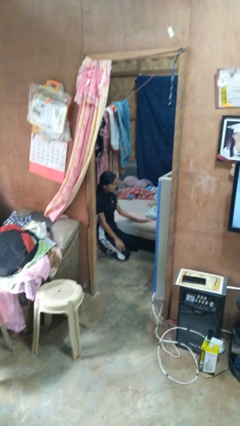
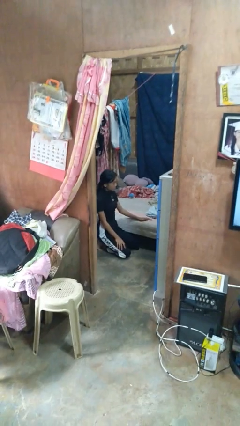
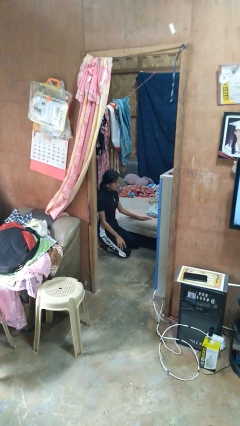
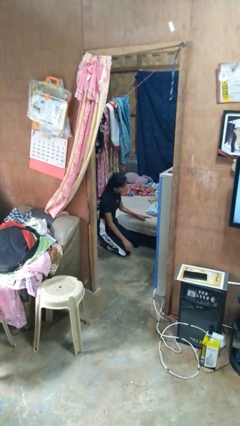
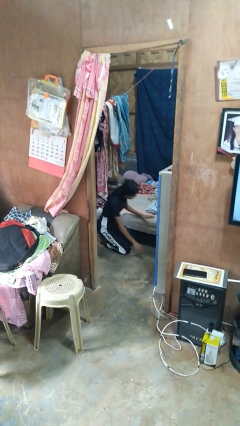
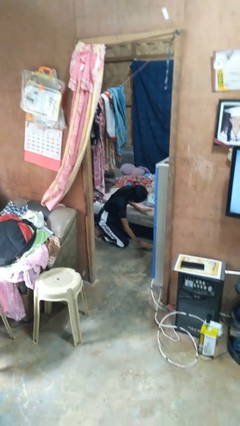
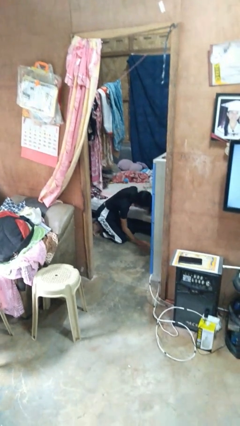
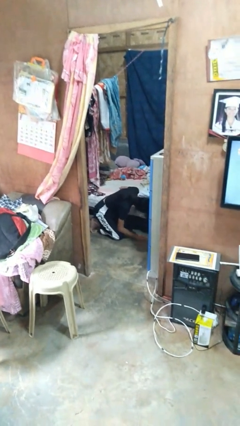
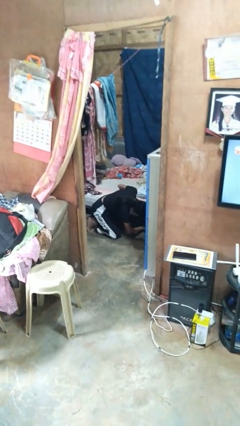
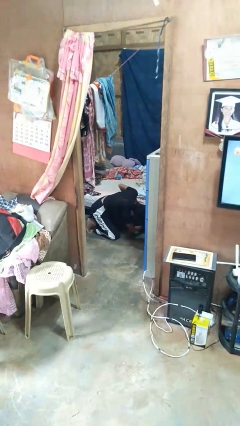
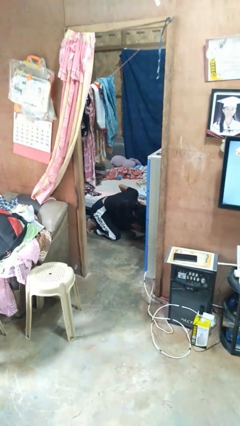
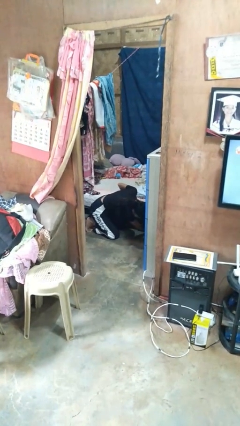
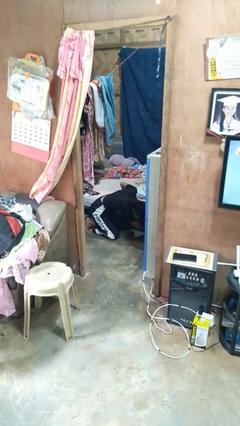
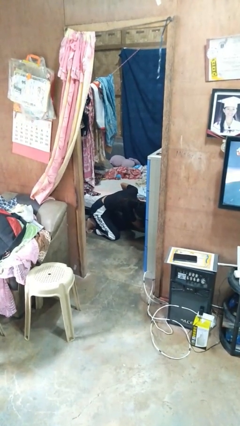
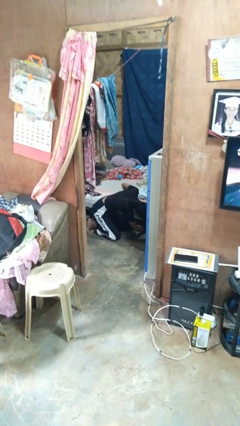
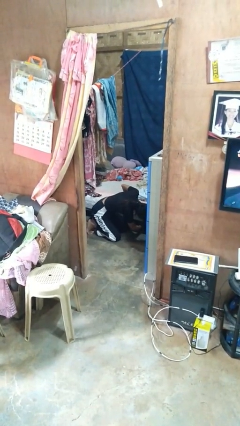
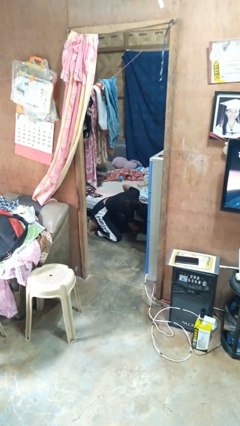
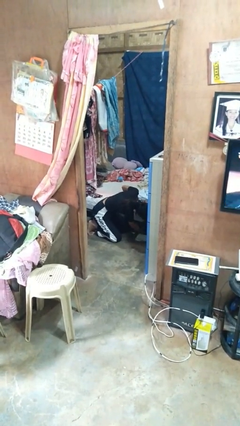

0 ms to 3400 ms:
person searches under bed

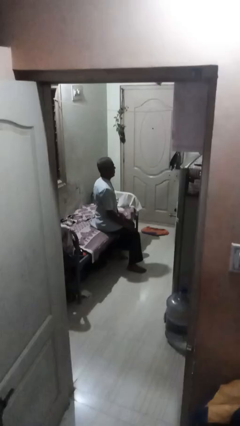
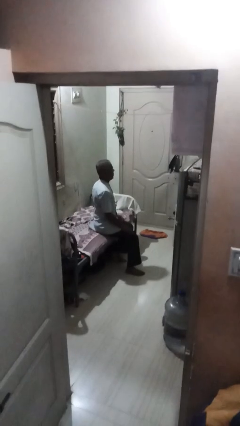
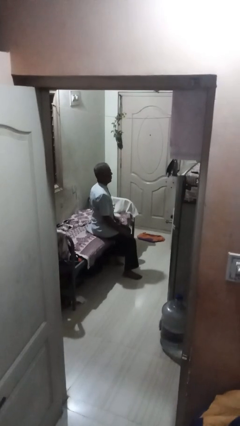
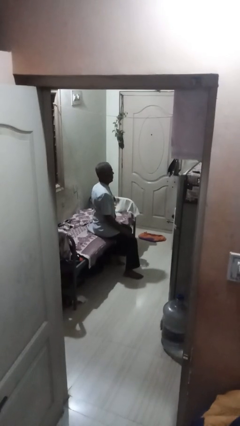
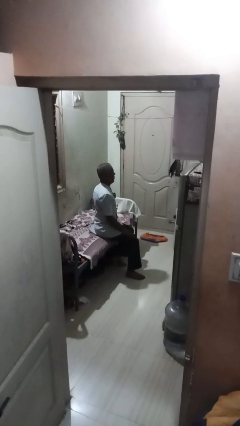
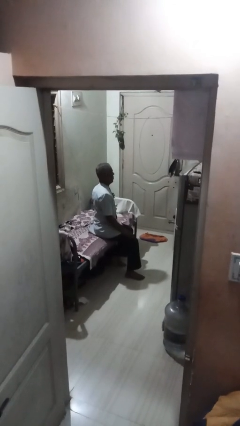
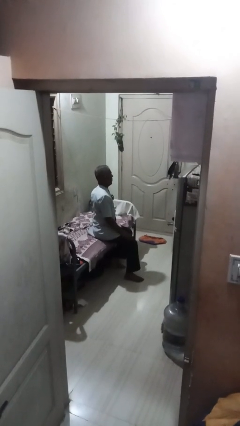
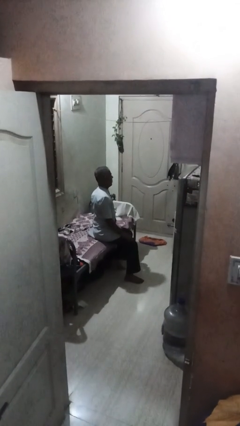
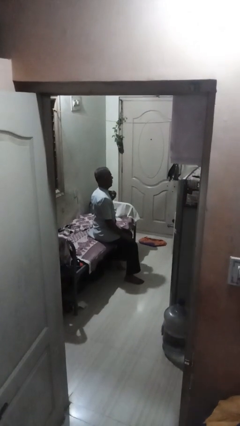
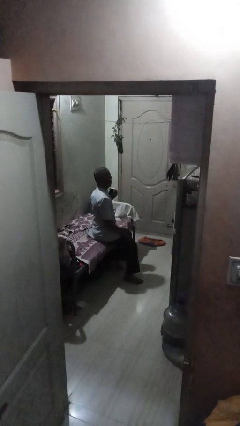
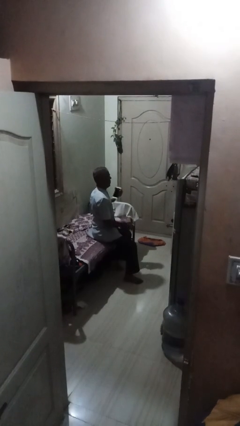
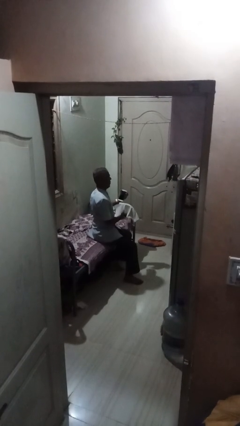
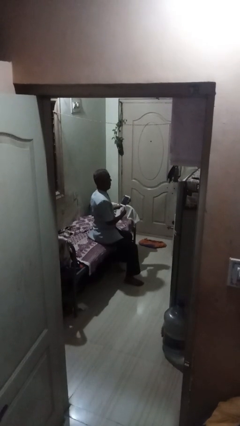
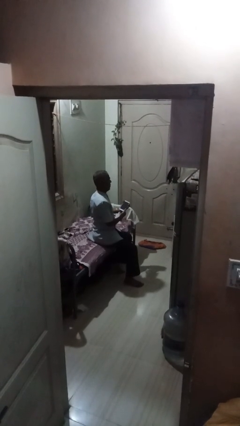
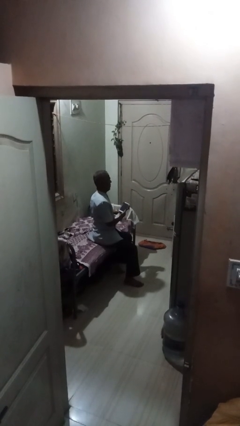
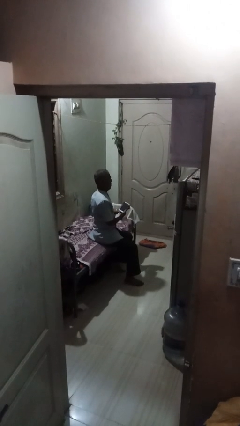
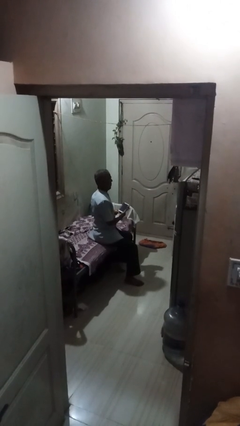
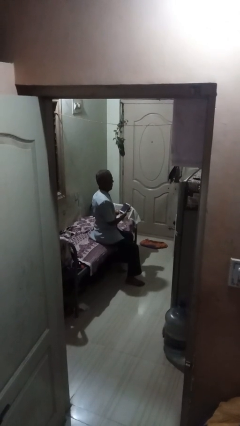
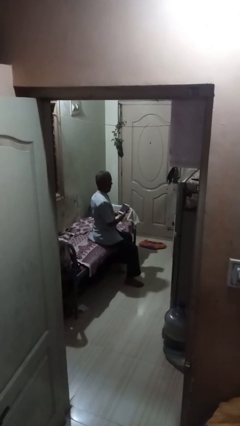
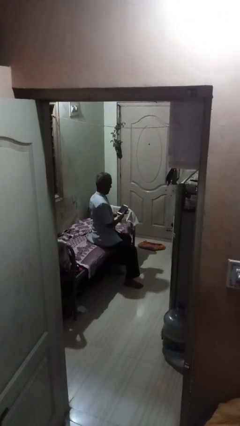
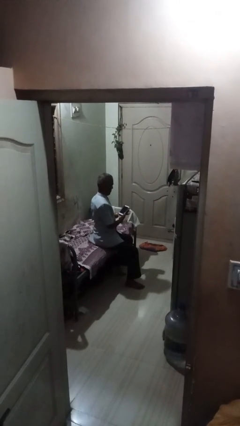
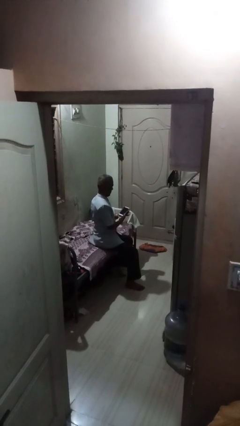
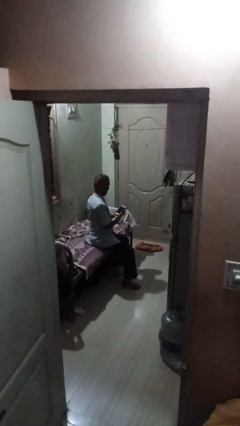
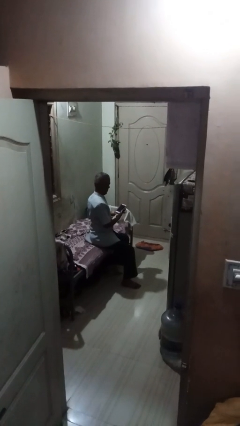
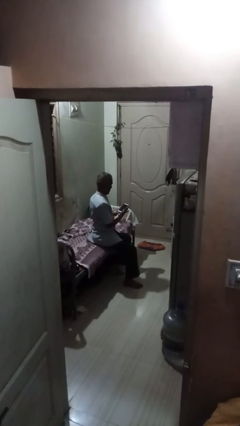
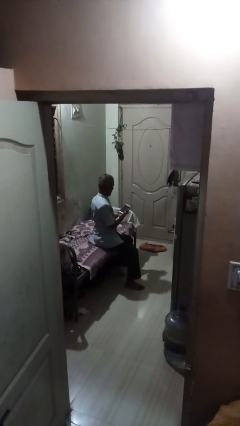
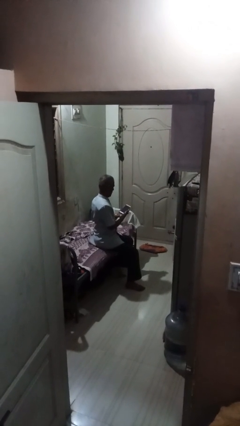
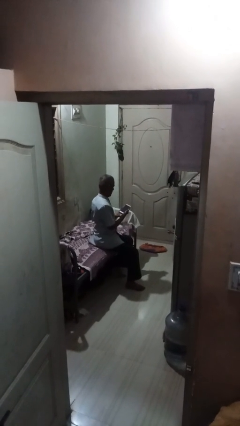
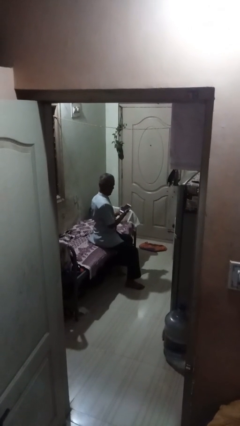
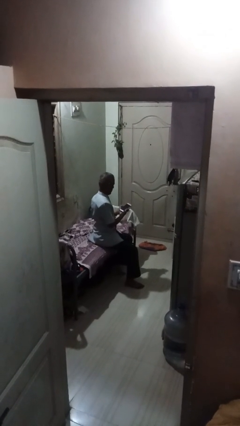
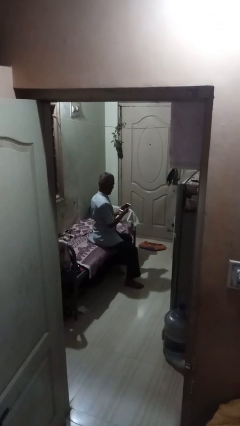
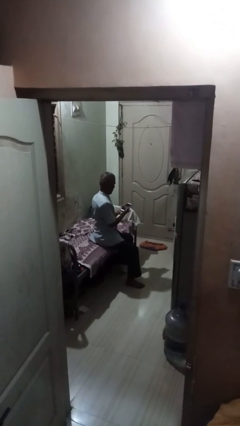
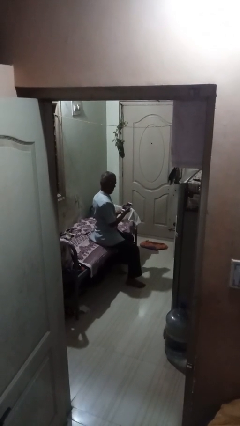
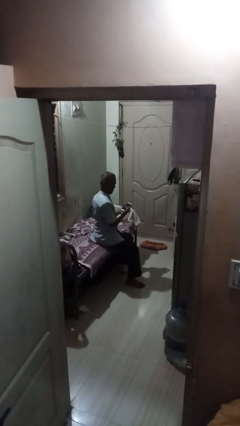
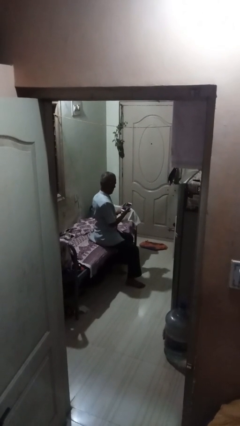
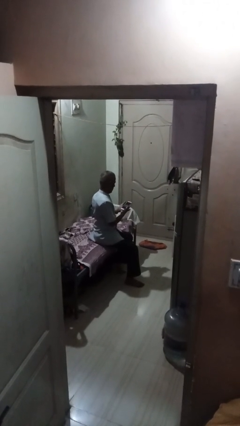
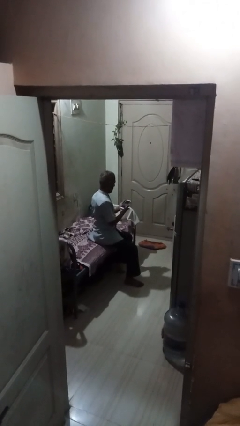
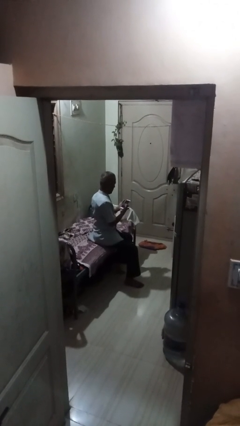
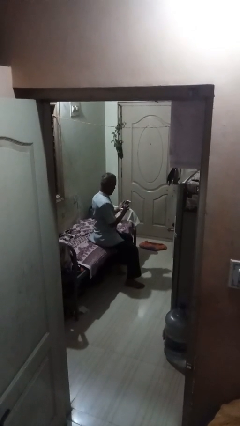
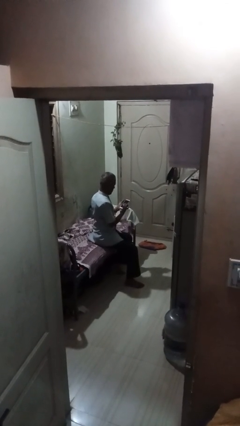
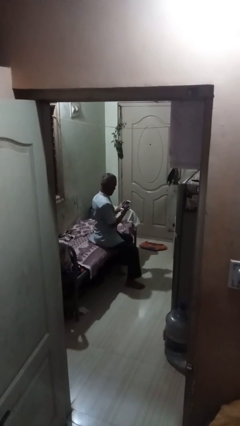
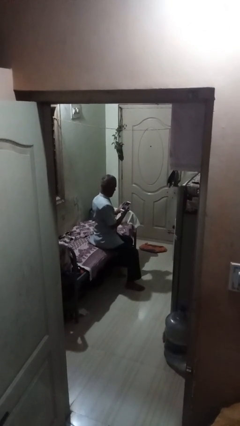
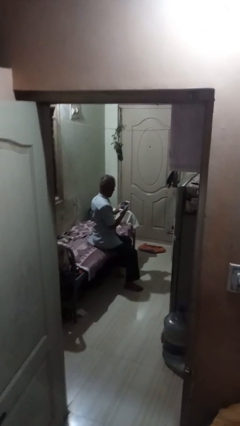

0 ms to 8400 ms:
person takes phone from pocket

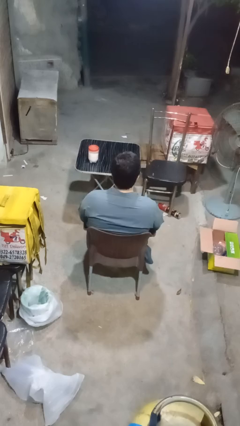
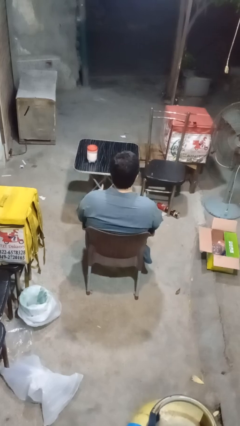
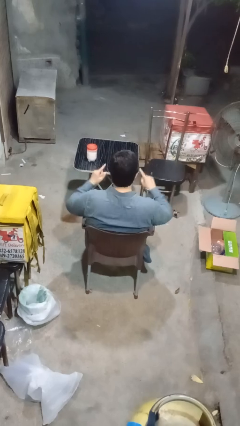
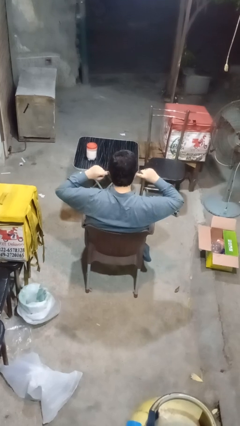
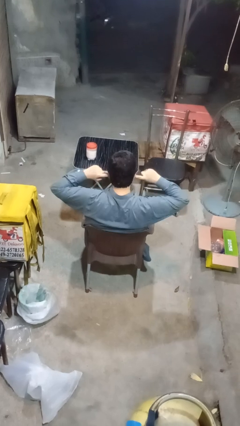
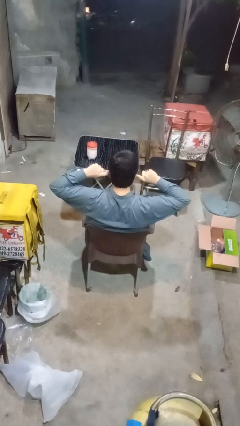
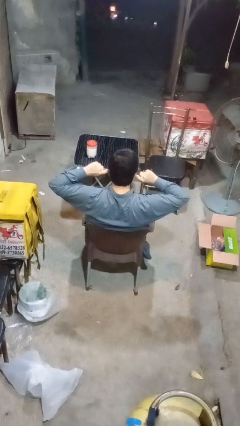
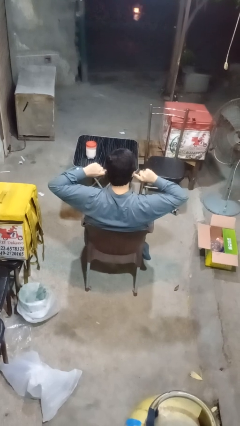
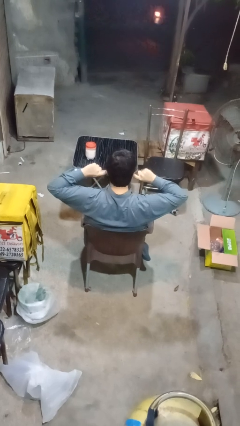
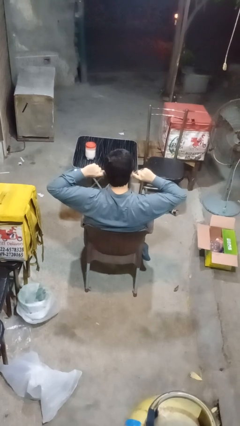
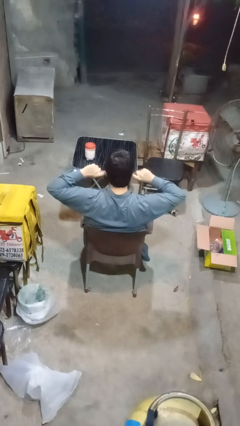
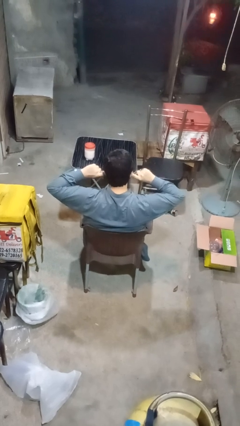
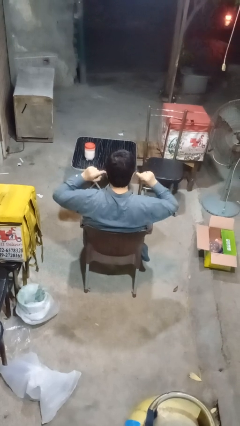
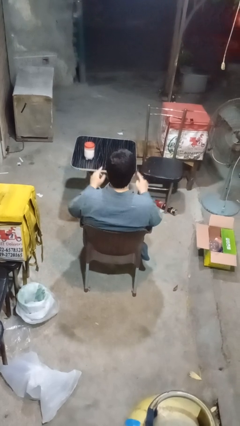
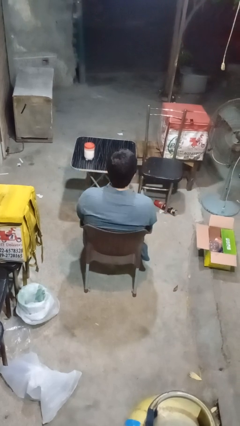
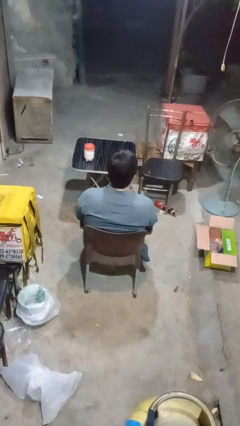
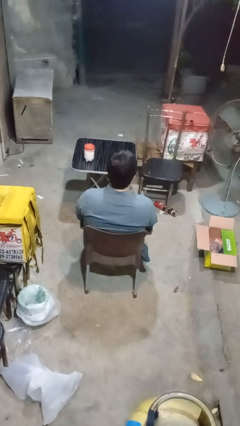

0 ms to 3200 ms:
person puts fingers in ear

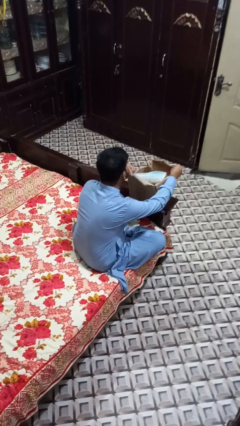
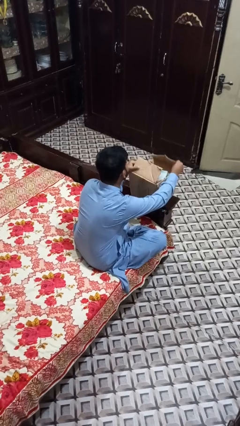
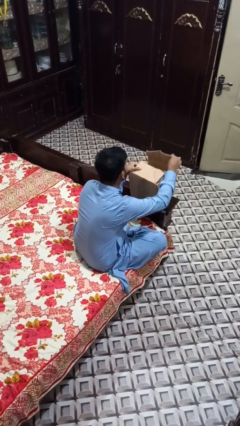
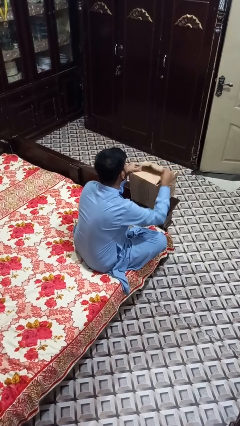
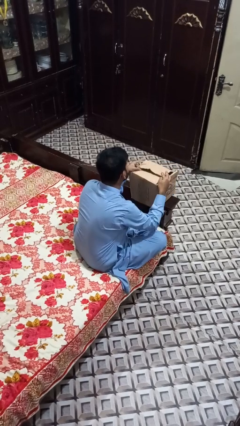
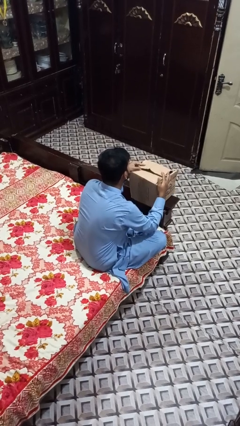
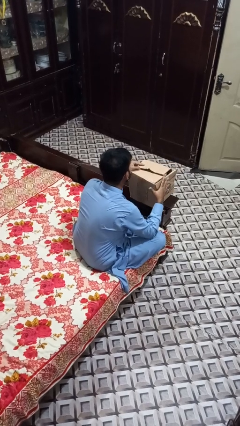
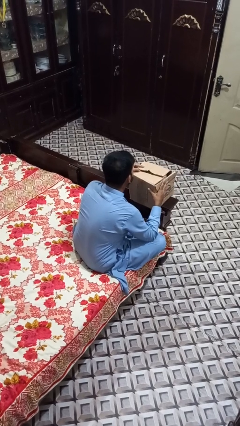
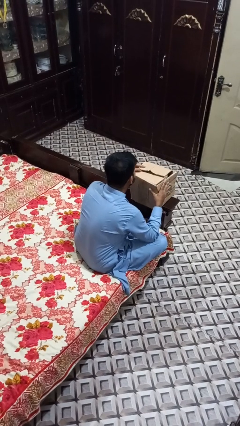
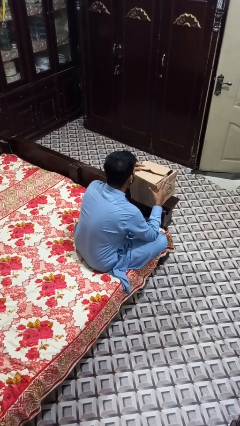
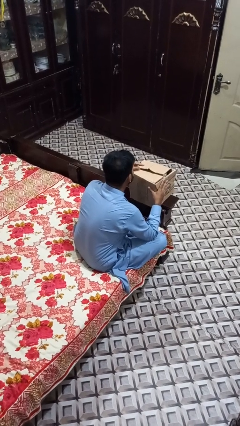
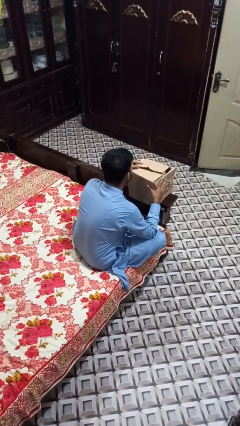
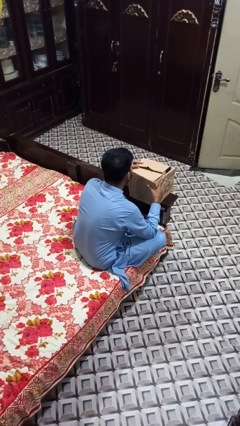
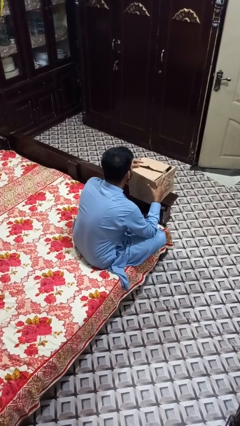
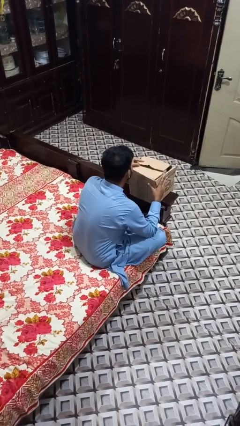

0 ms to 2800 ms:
person closes box

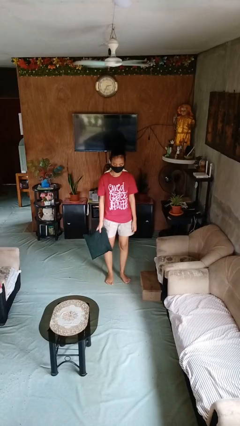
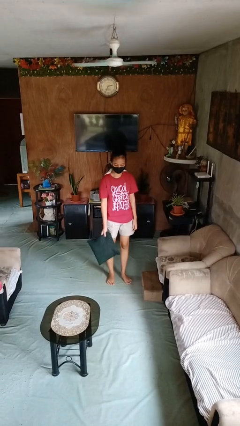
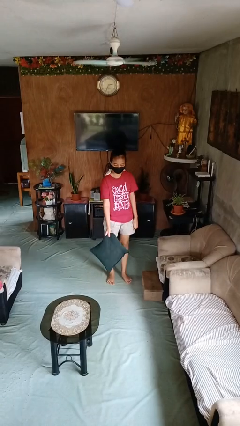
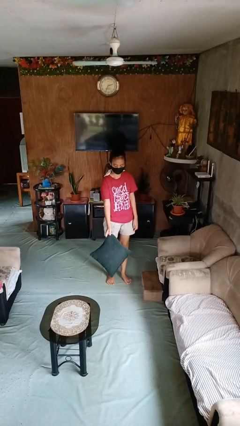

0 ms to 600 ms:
person throws object to ground
